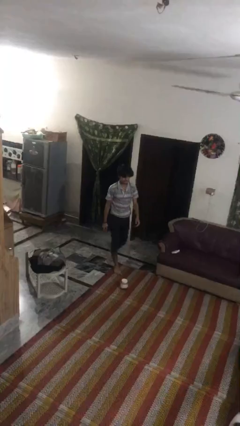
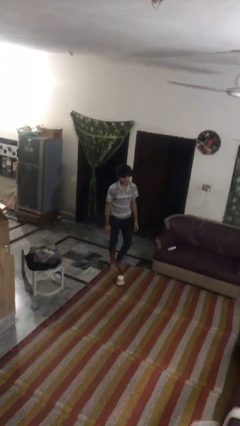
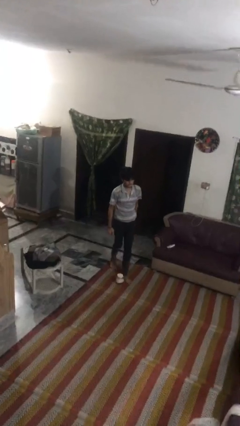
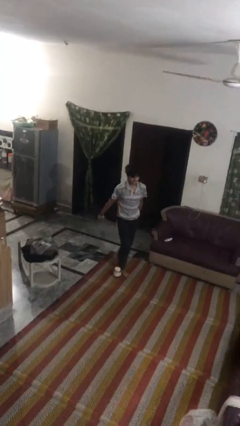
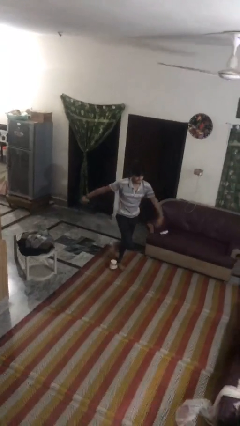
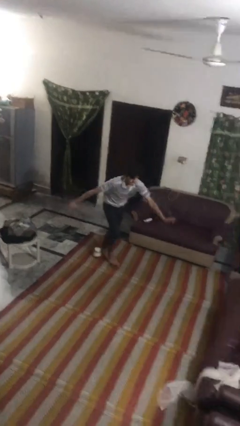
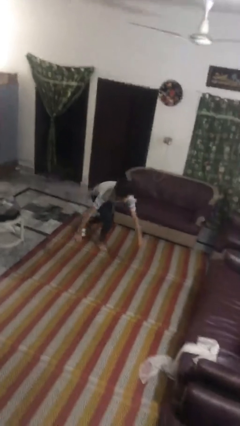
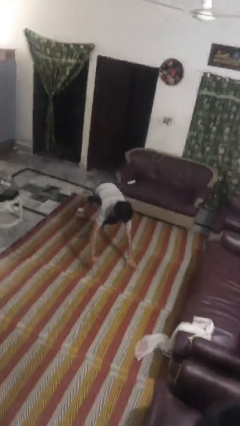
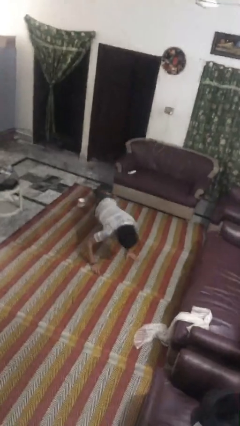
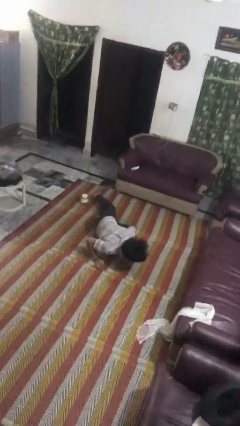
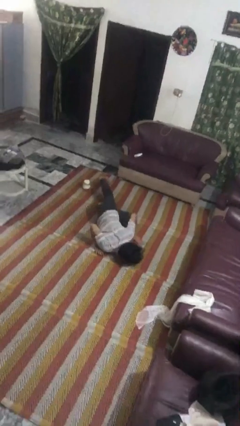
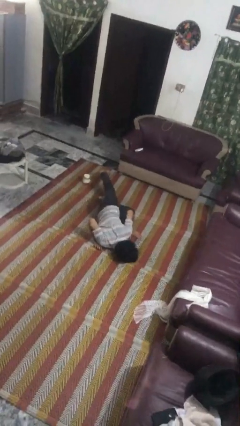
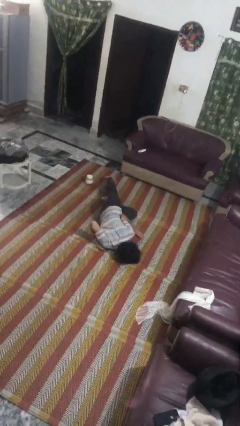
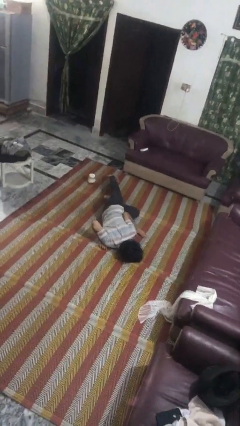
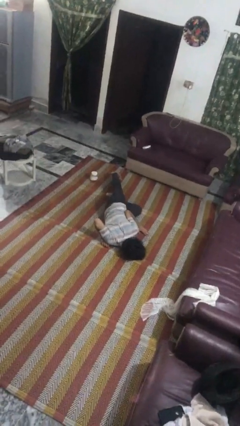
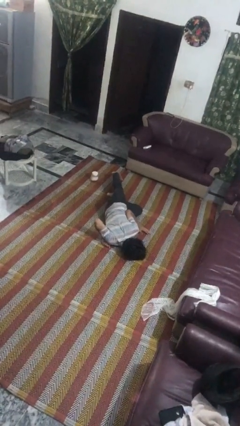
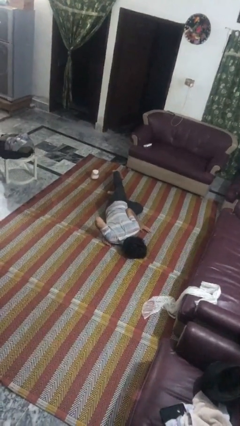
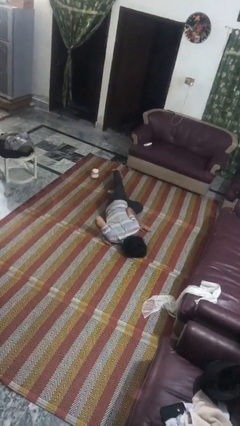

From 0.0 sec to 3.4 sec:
person trips on object on floor

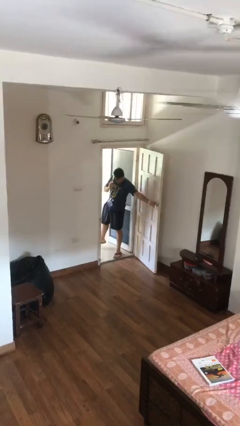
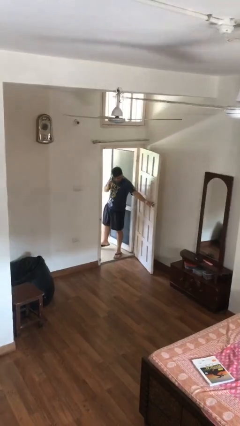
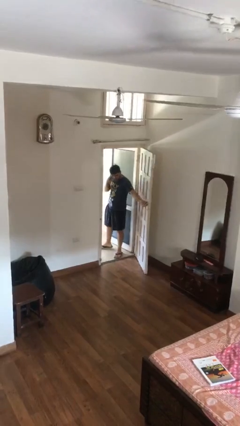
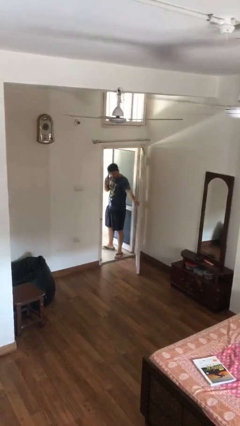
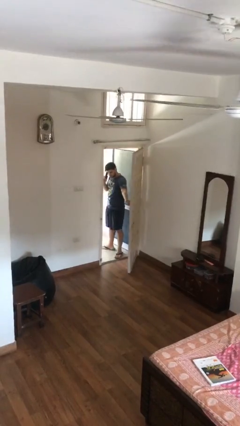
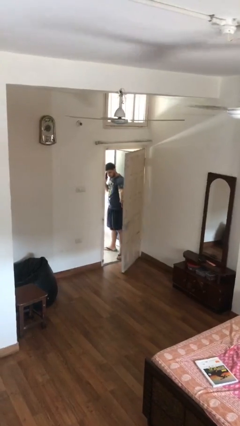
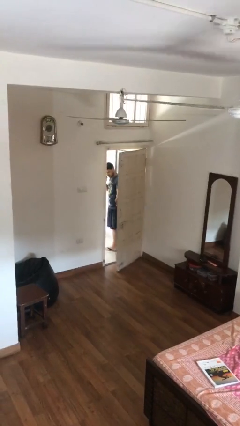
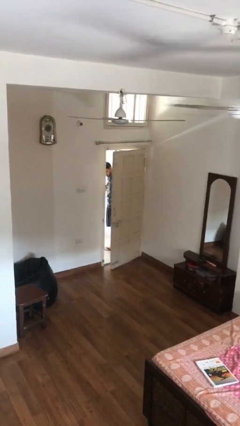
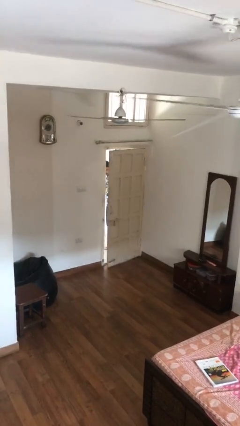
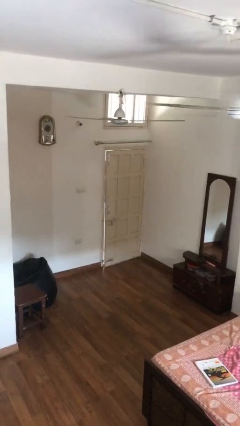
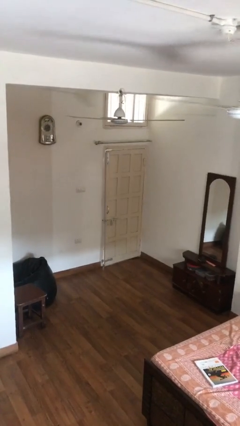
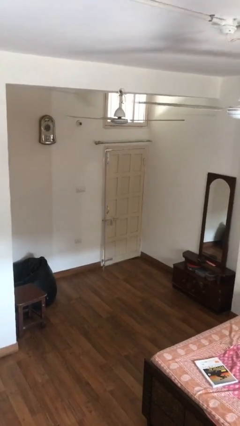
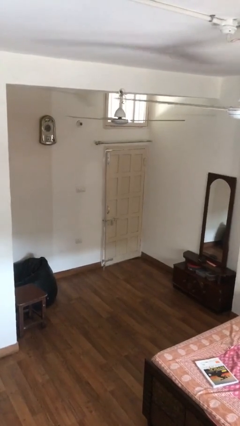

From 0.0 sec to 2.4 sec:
person closes facility door

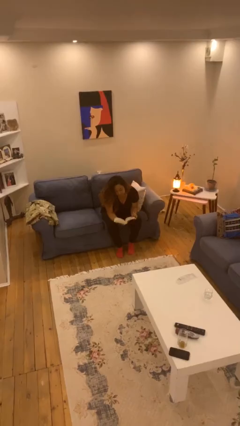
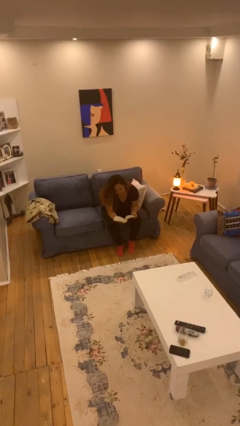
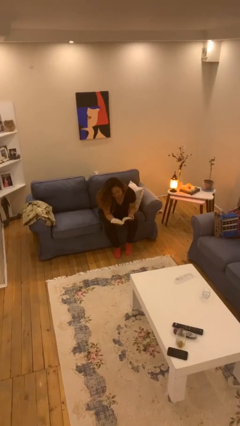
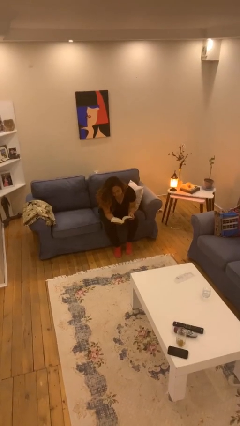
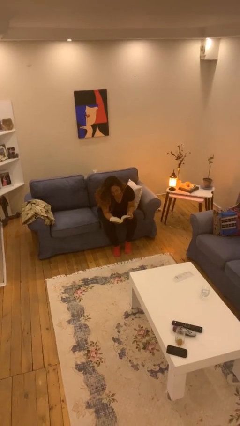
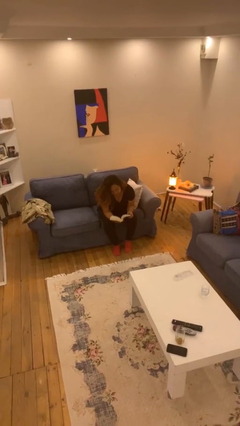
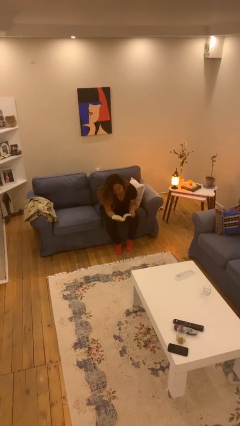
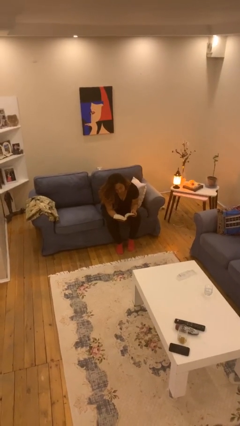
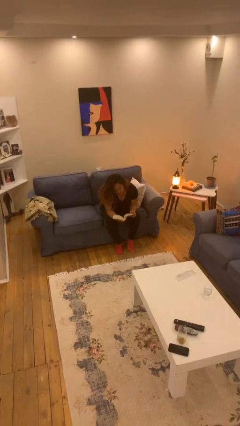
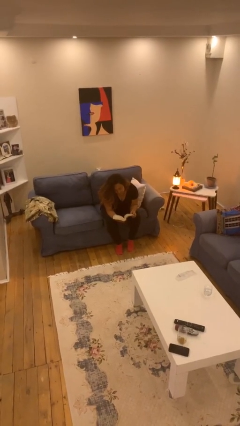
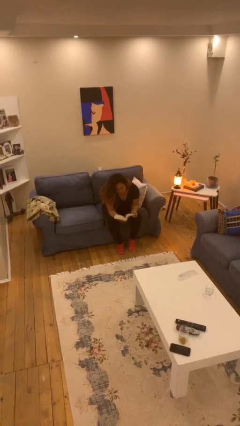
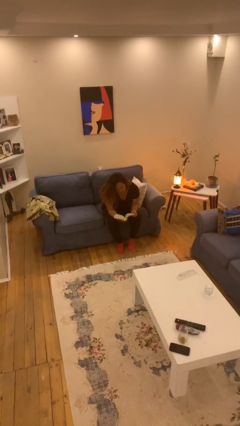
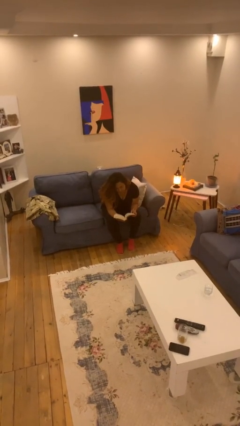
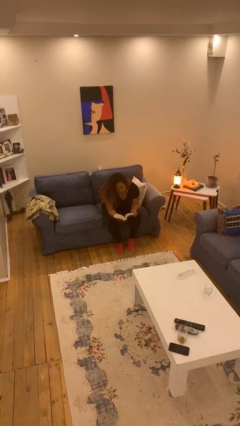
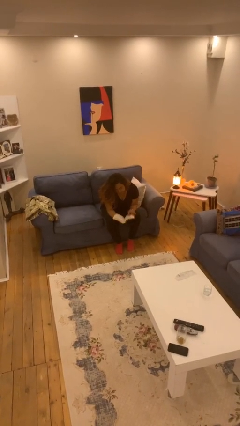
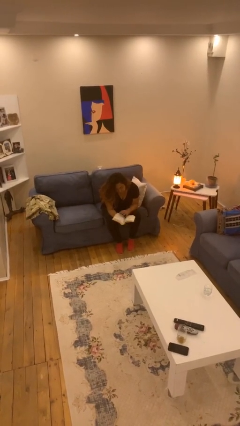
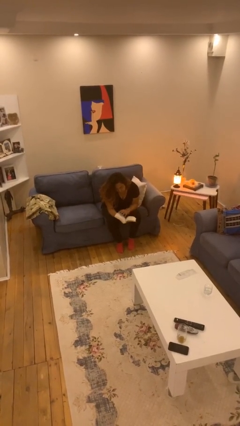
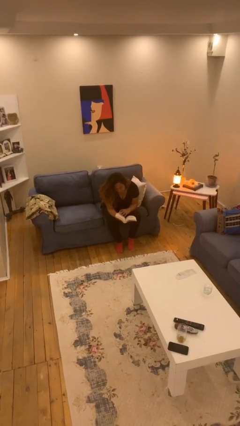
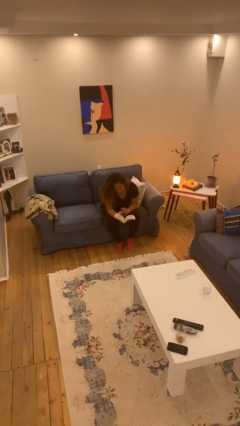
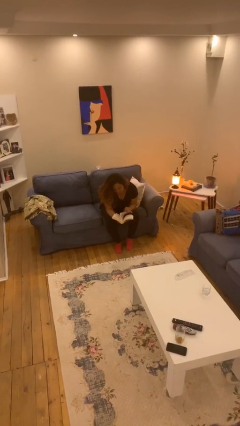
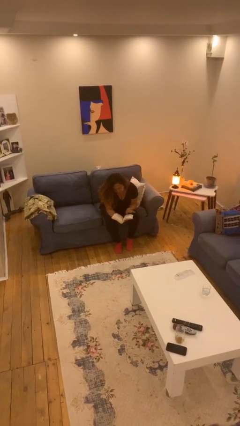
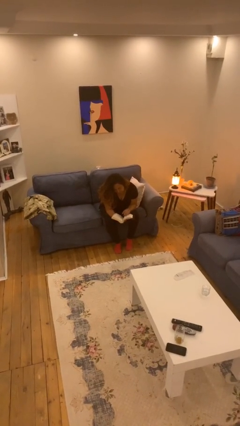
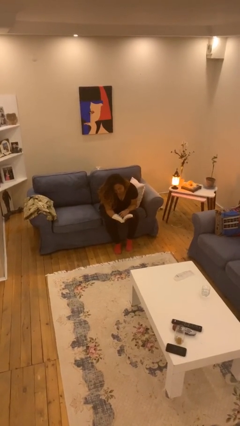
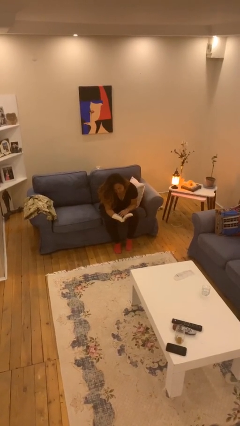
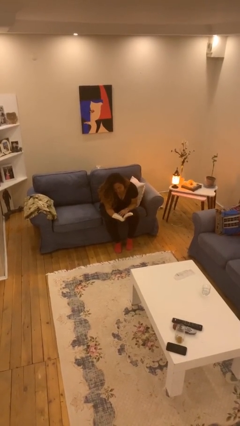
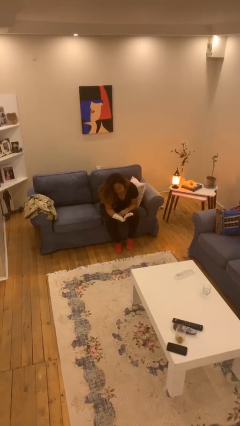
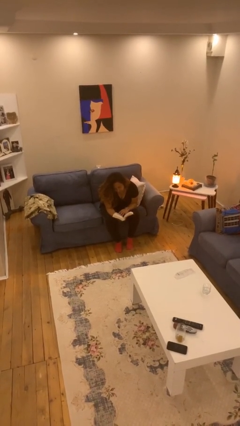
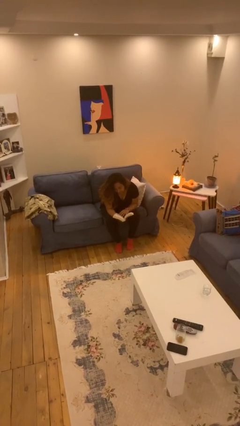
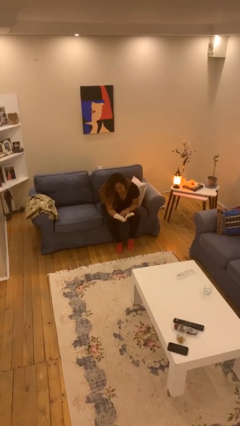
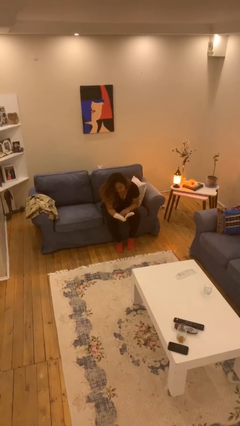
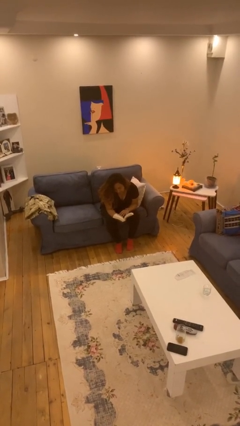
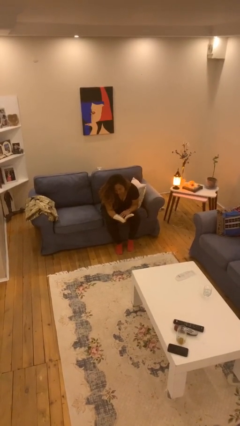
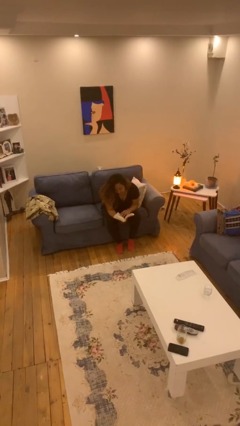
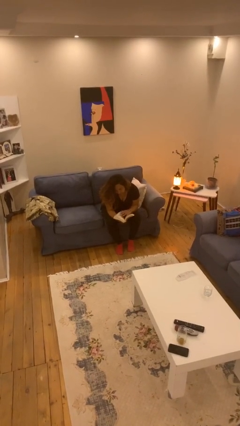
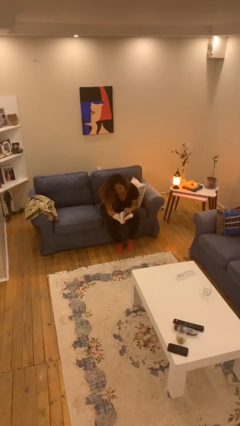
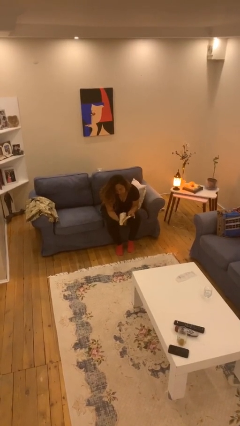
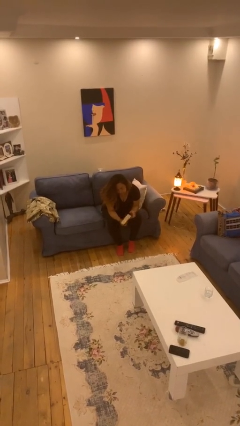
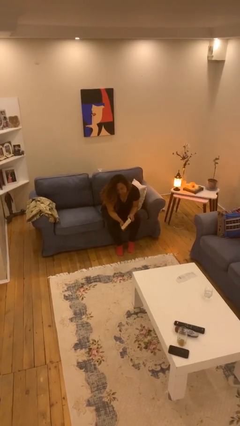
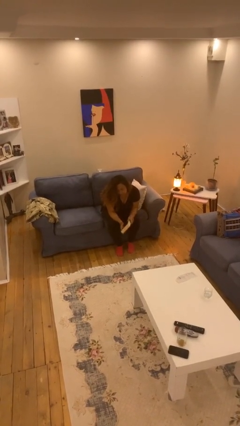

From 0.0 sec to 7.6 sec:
person reads document

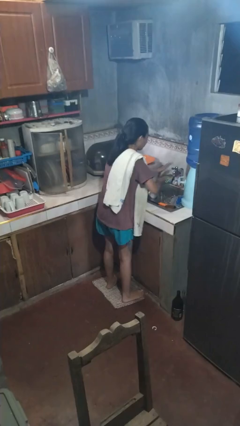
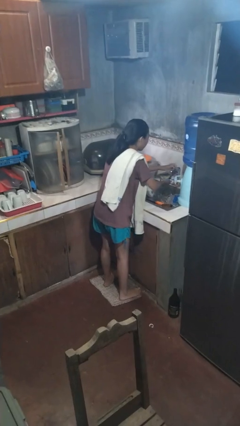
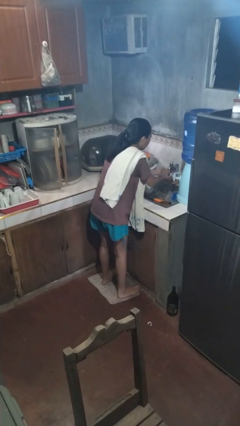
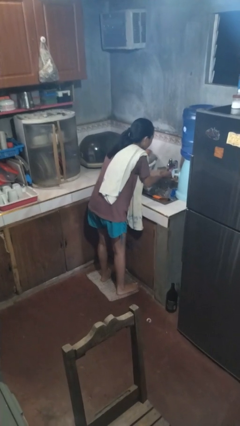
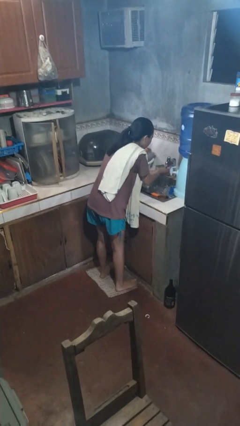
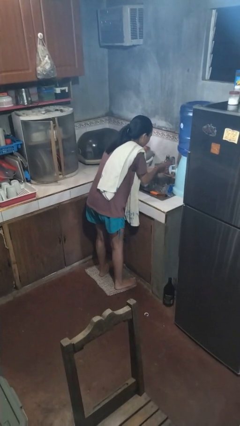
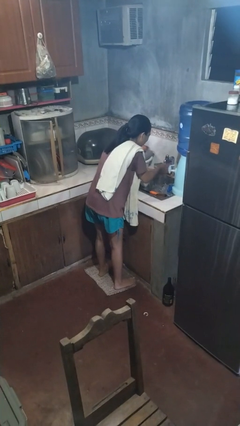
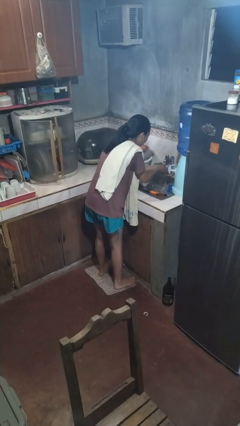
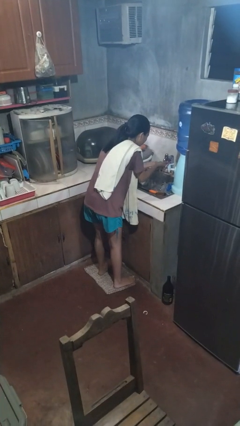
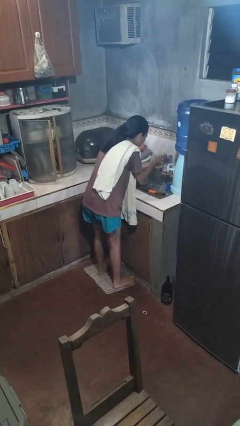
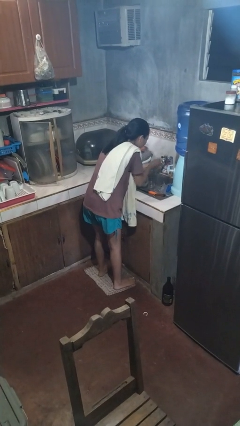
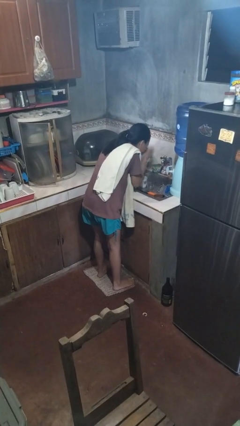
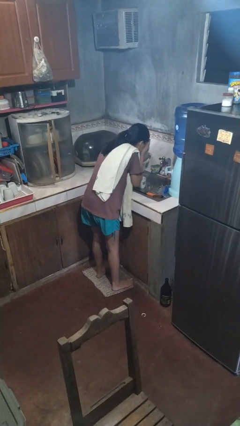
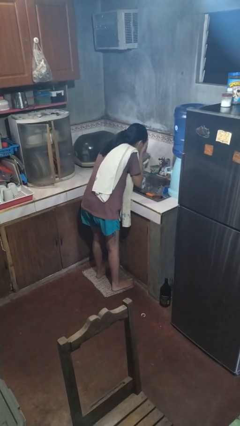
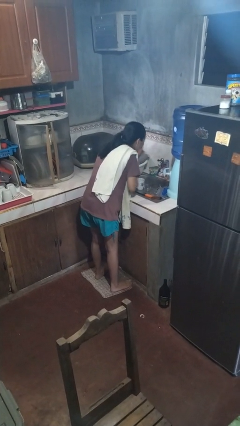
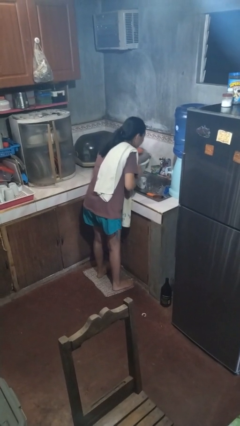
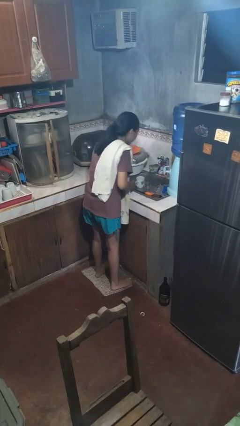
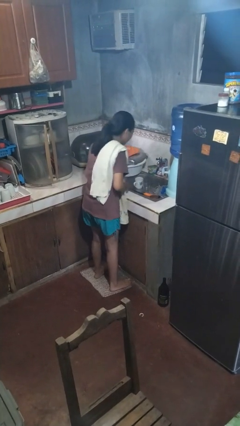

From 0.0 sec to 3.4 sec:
person washes face

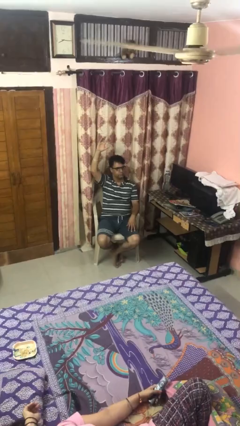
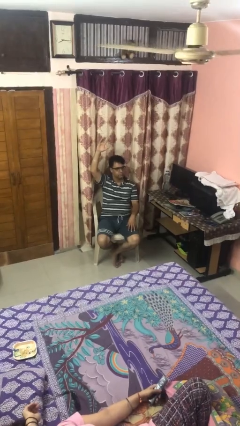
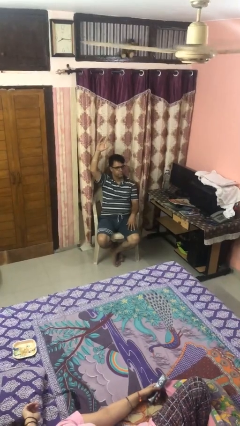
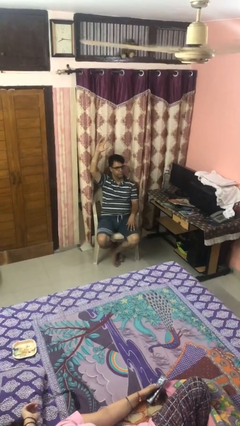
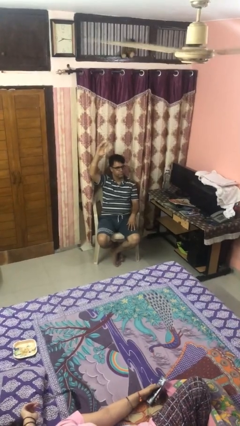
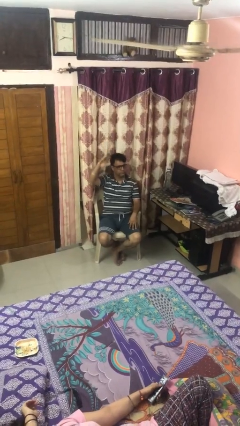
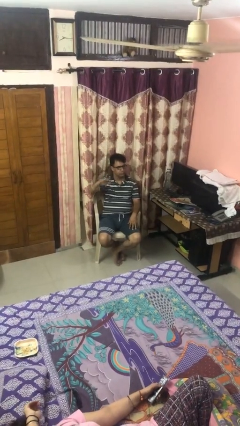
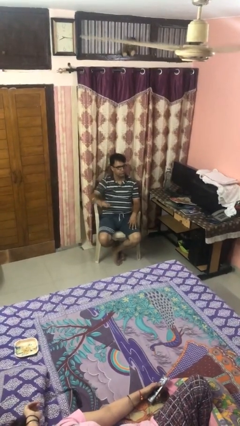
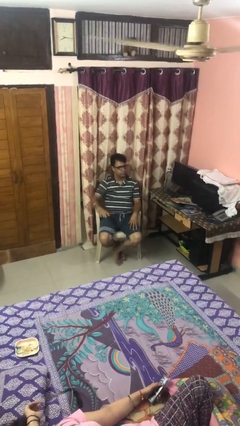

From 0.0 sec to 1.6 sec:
person gestures lower hand
